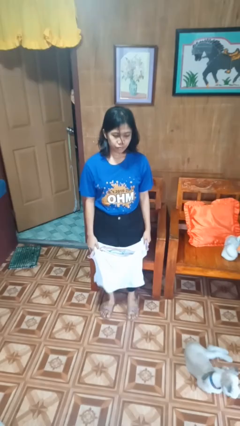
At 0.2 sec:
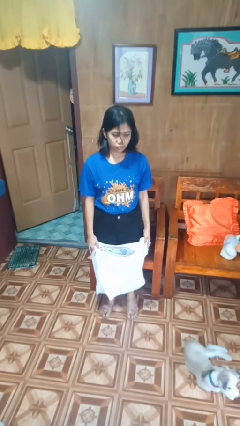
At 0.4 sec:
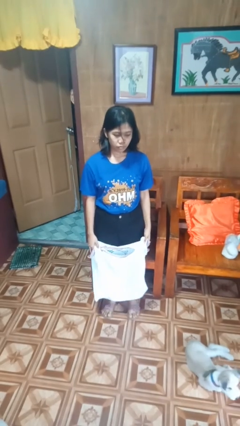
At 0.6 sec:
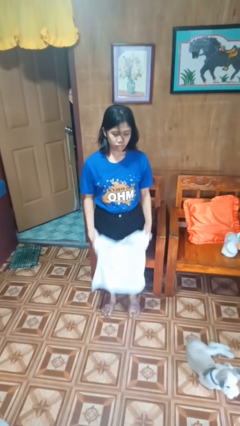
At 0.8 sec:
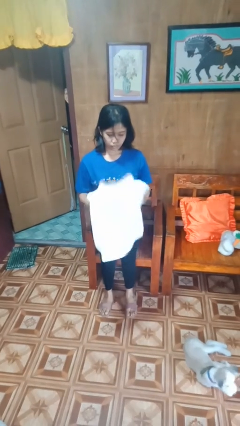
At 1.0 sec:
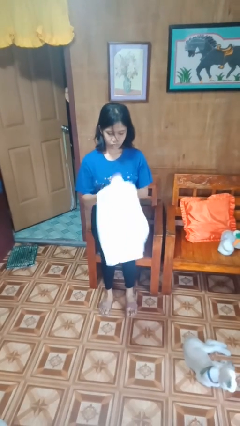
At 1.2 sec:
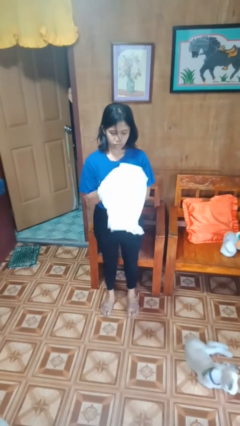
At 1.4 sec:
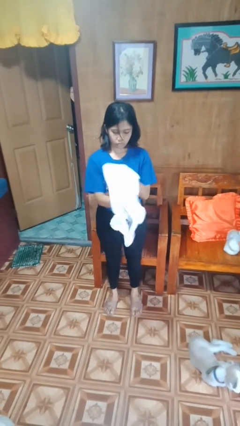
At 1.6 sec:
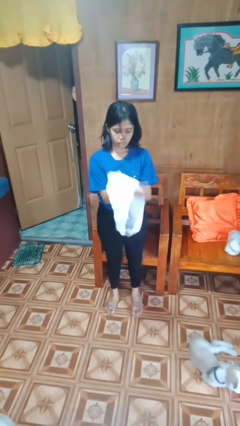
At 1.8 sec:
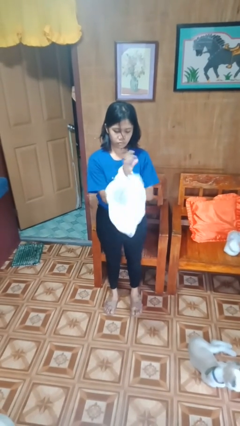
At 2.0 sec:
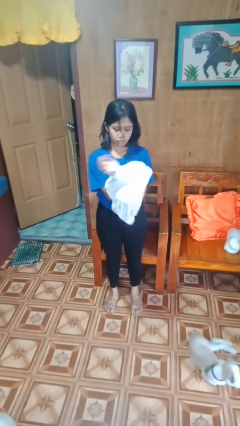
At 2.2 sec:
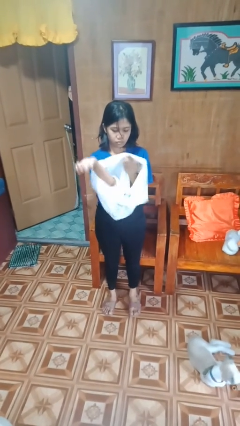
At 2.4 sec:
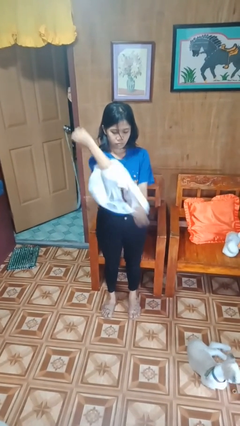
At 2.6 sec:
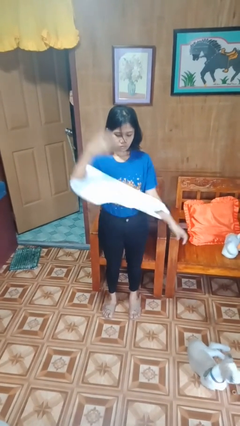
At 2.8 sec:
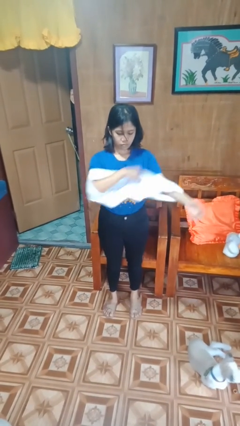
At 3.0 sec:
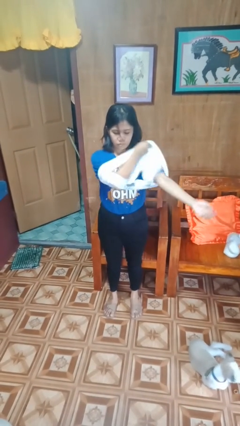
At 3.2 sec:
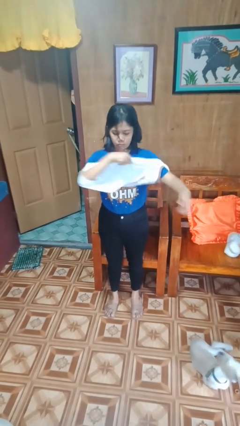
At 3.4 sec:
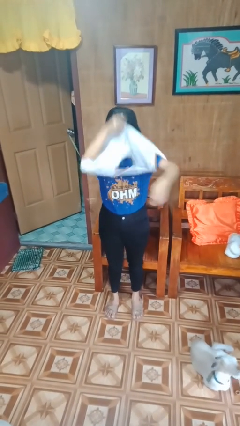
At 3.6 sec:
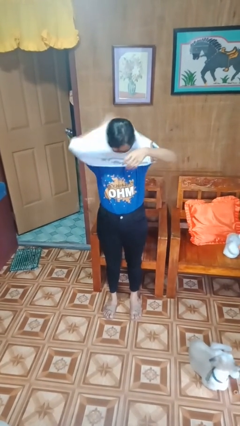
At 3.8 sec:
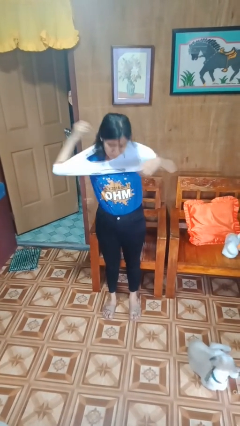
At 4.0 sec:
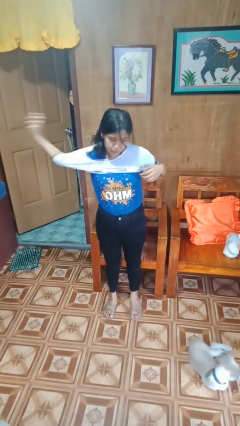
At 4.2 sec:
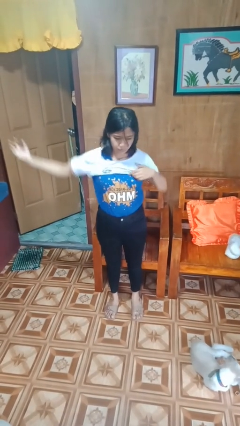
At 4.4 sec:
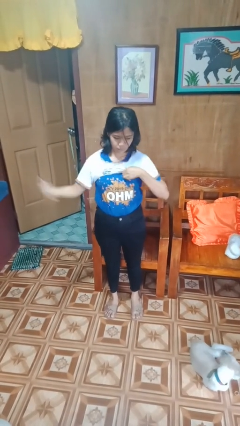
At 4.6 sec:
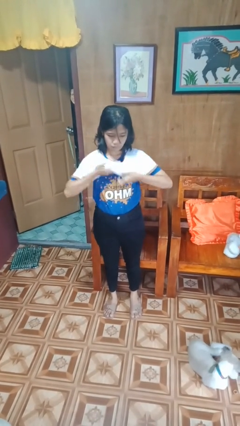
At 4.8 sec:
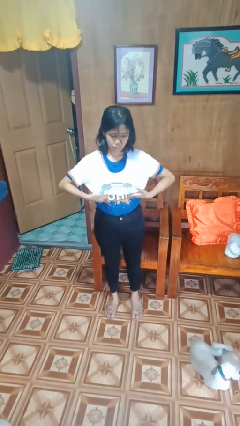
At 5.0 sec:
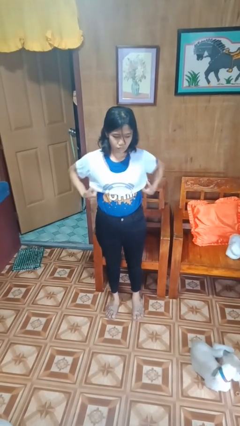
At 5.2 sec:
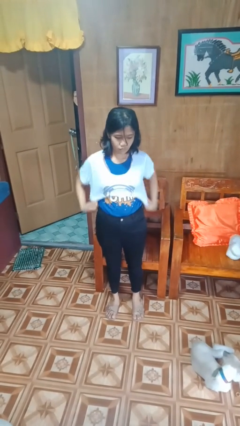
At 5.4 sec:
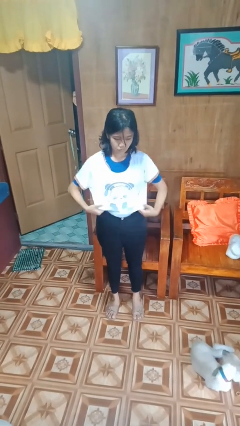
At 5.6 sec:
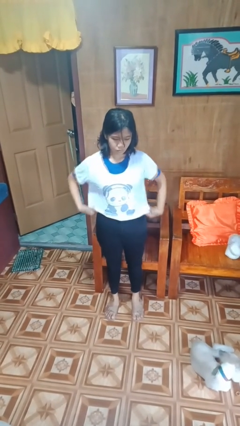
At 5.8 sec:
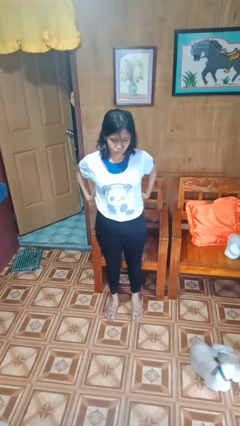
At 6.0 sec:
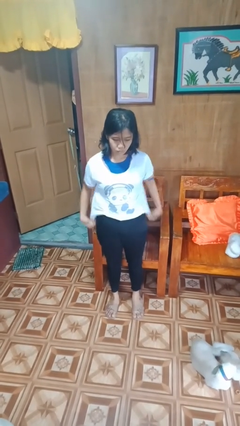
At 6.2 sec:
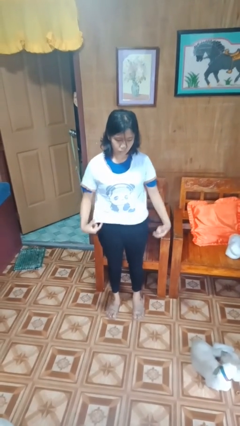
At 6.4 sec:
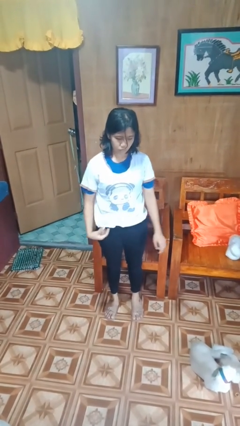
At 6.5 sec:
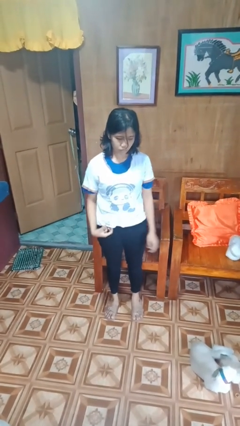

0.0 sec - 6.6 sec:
person puts on shirt

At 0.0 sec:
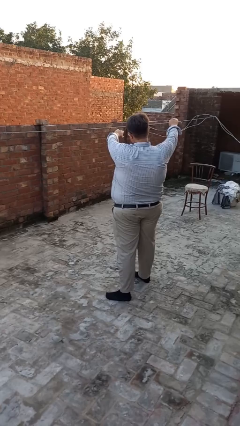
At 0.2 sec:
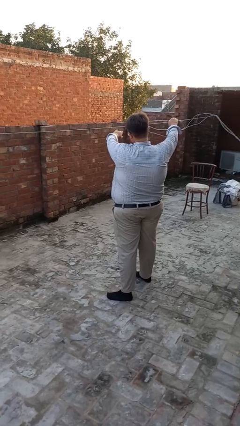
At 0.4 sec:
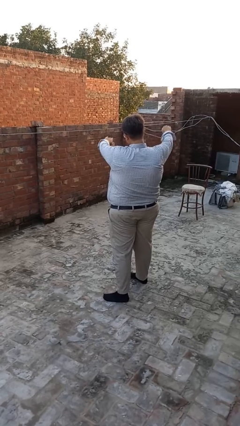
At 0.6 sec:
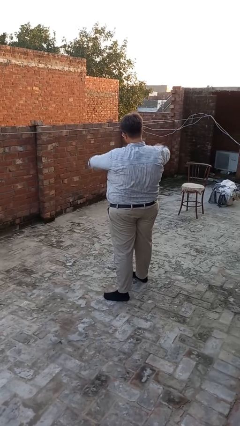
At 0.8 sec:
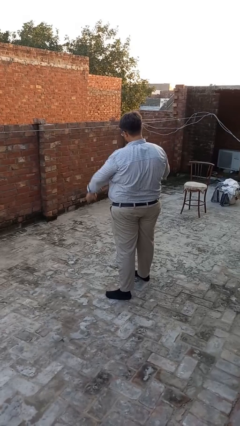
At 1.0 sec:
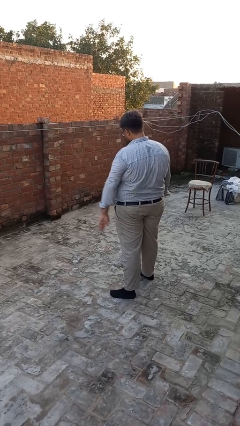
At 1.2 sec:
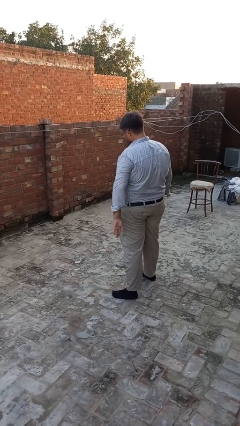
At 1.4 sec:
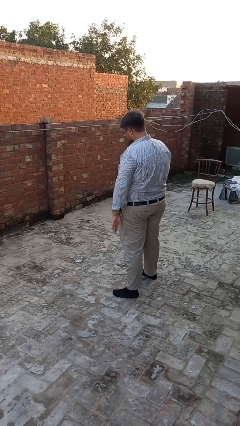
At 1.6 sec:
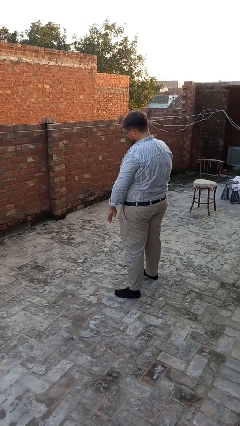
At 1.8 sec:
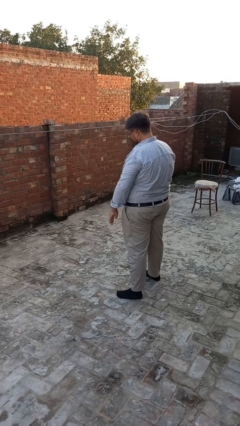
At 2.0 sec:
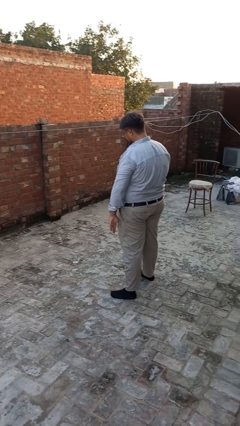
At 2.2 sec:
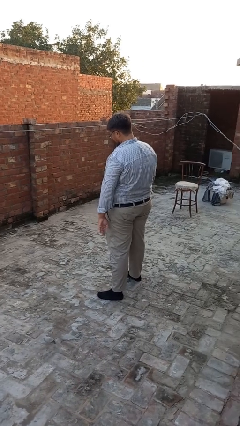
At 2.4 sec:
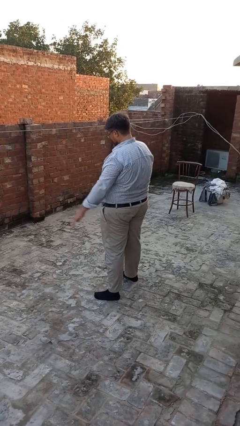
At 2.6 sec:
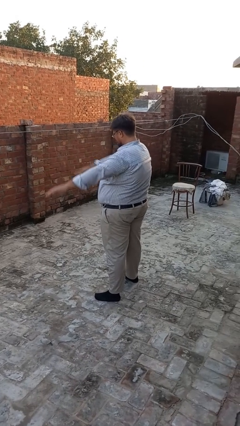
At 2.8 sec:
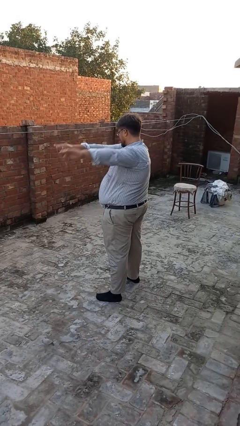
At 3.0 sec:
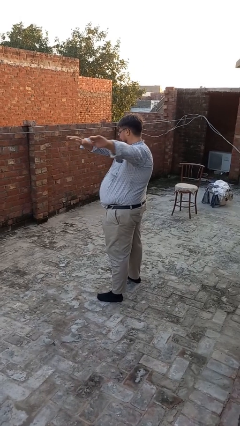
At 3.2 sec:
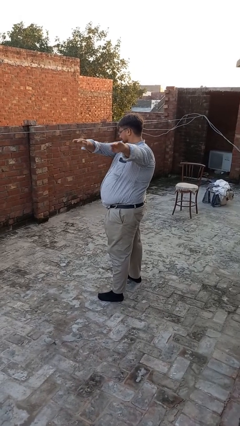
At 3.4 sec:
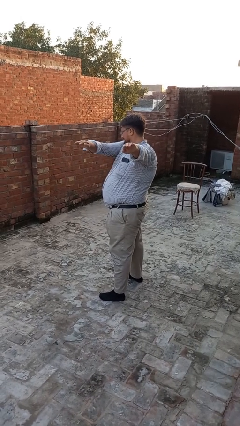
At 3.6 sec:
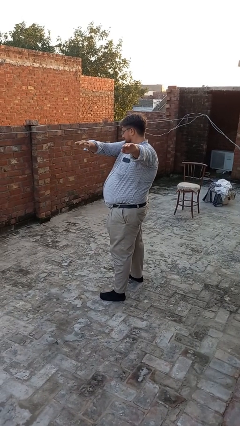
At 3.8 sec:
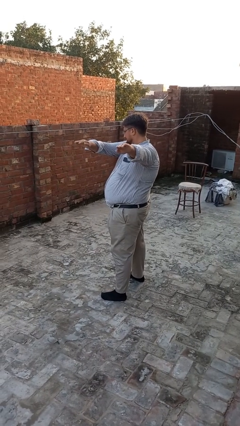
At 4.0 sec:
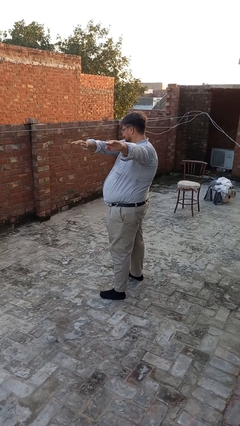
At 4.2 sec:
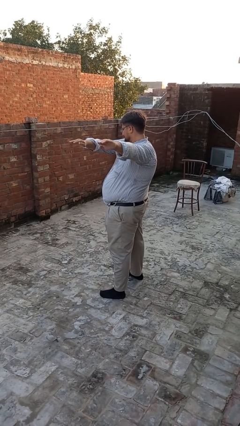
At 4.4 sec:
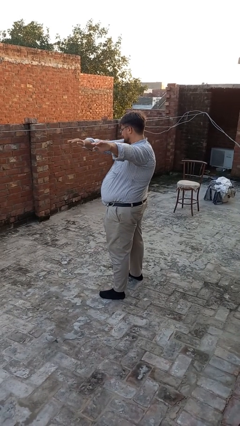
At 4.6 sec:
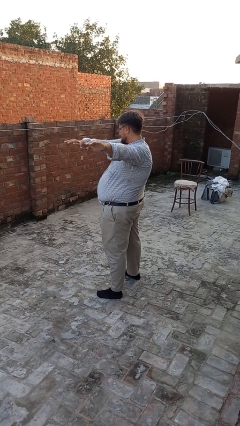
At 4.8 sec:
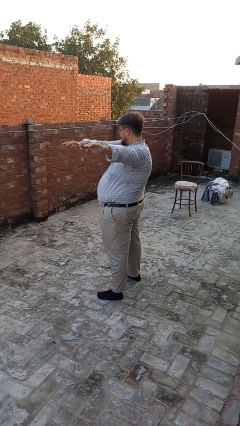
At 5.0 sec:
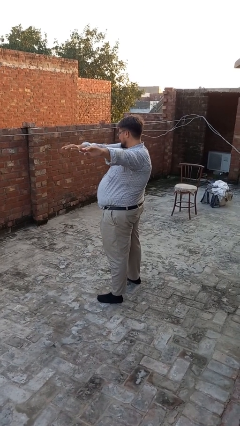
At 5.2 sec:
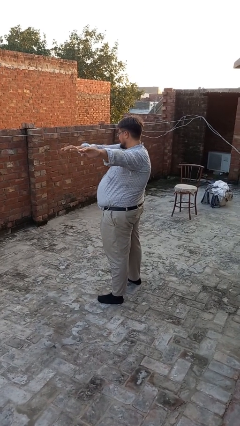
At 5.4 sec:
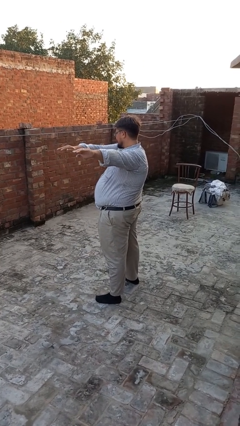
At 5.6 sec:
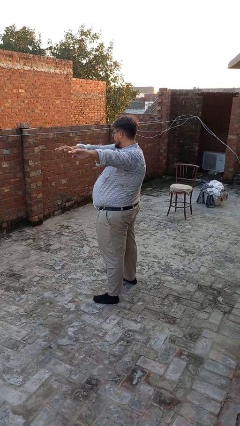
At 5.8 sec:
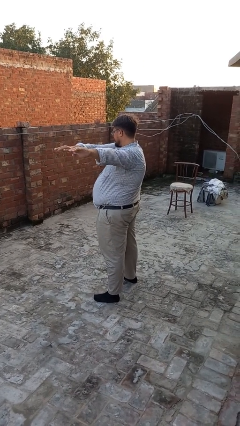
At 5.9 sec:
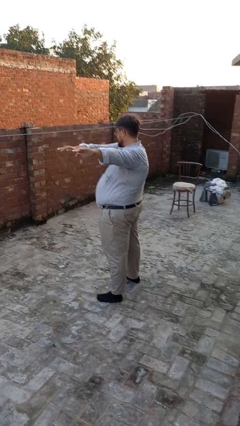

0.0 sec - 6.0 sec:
person gestures swipe left

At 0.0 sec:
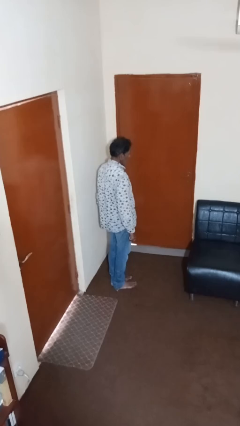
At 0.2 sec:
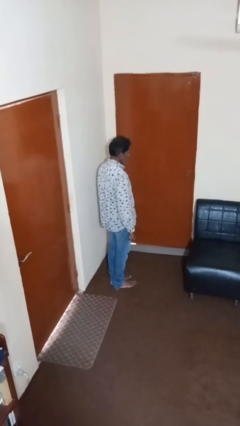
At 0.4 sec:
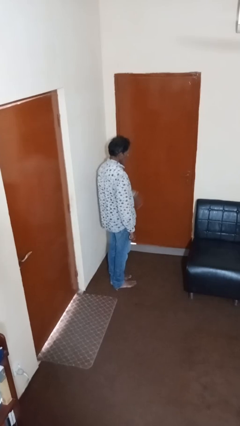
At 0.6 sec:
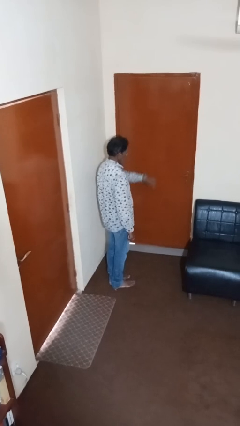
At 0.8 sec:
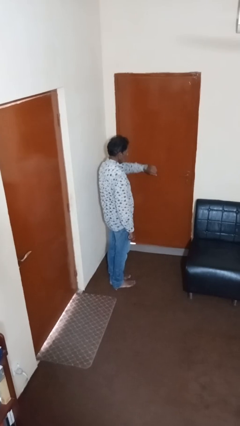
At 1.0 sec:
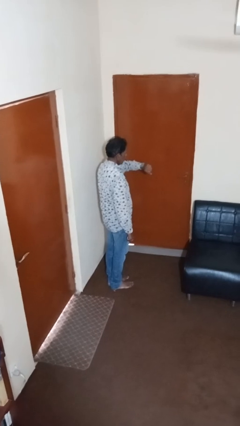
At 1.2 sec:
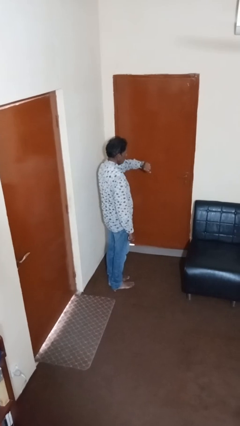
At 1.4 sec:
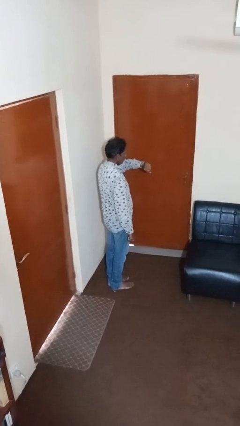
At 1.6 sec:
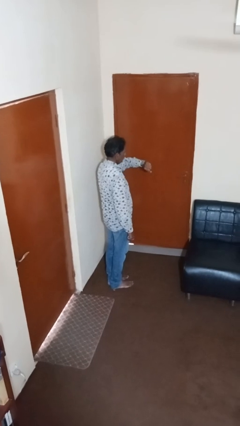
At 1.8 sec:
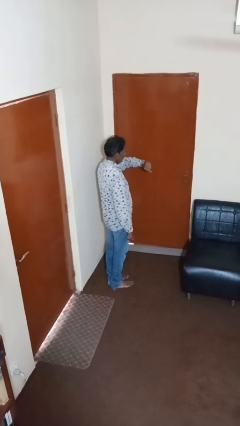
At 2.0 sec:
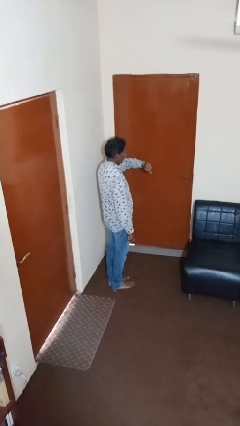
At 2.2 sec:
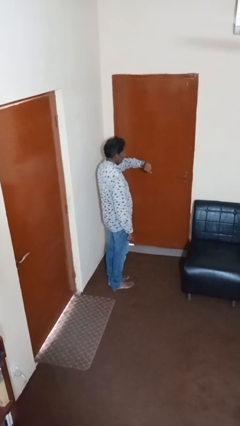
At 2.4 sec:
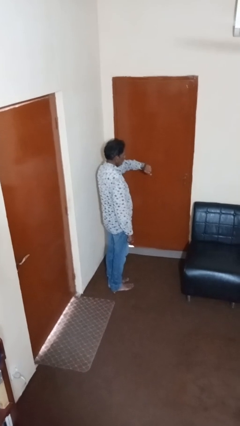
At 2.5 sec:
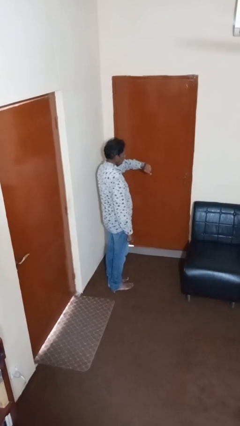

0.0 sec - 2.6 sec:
person looks at wristwatch

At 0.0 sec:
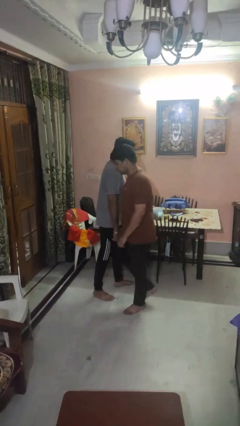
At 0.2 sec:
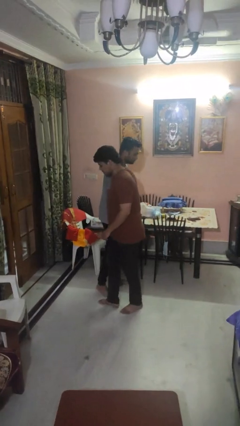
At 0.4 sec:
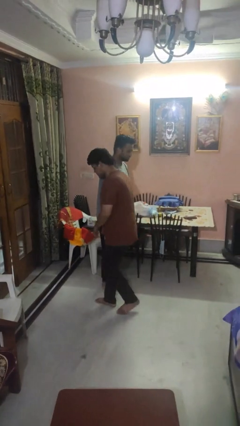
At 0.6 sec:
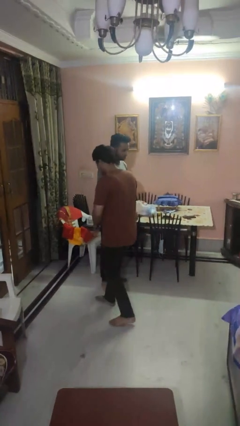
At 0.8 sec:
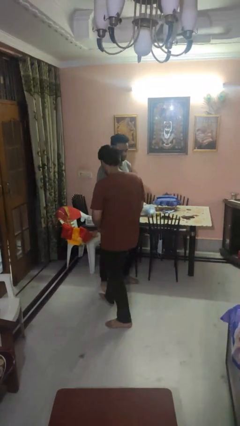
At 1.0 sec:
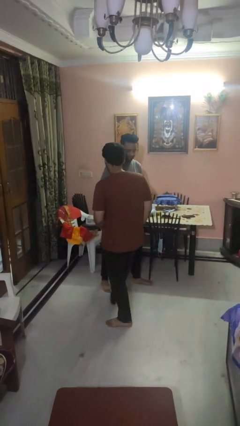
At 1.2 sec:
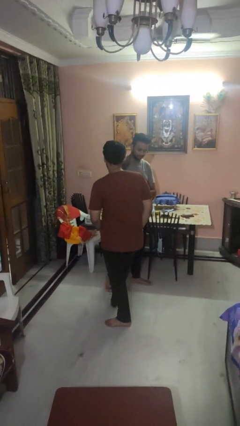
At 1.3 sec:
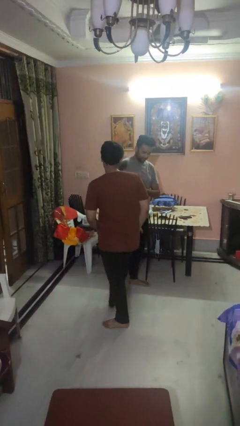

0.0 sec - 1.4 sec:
person bumps into person

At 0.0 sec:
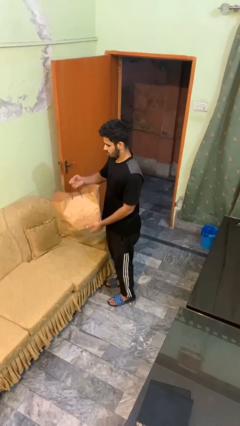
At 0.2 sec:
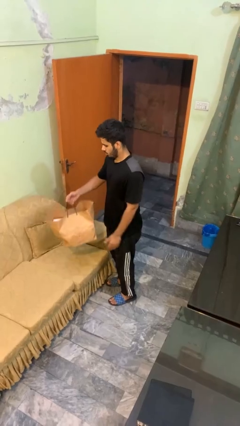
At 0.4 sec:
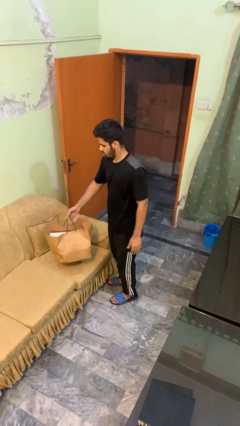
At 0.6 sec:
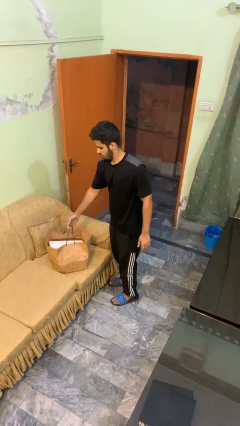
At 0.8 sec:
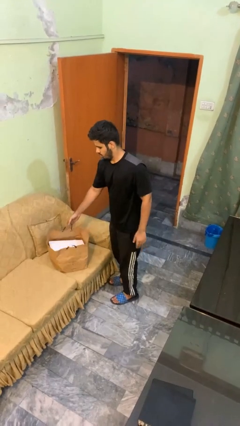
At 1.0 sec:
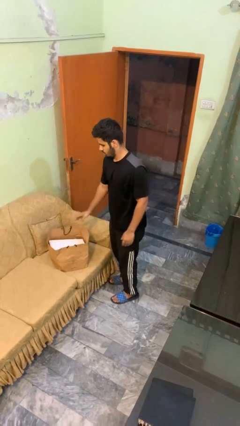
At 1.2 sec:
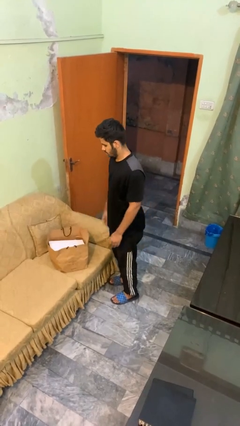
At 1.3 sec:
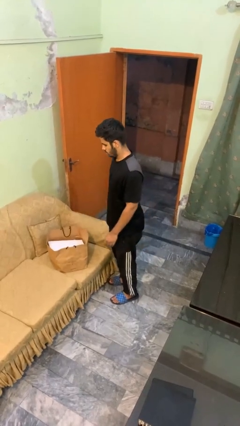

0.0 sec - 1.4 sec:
person puts down object on couch
